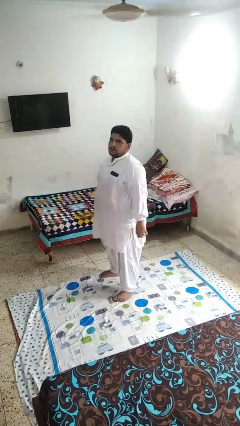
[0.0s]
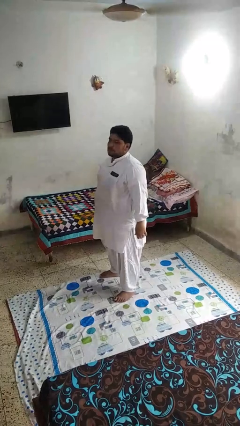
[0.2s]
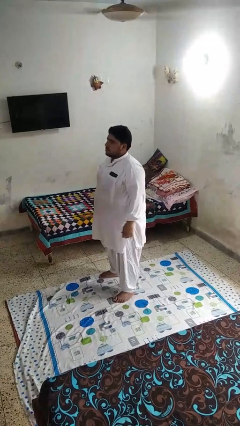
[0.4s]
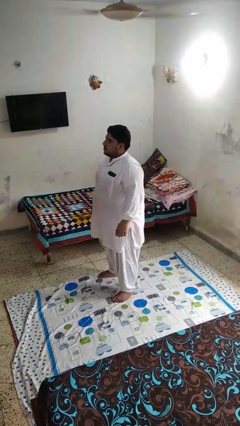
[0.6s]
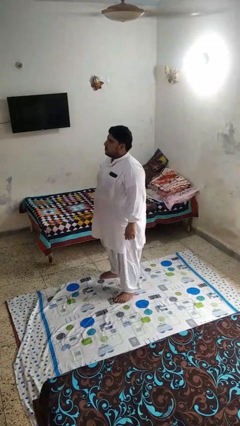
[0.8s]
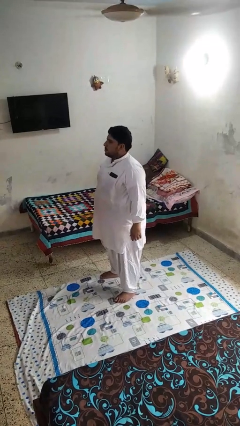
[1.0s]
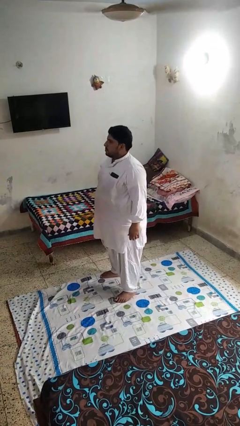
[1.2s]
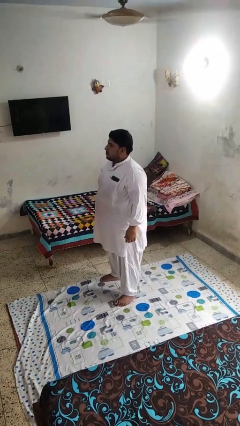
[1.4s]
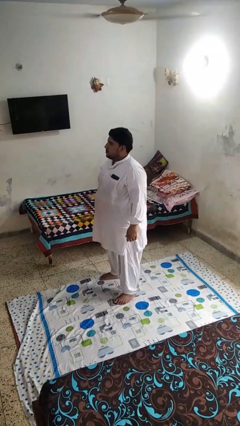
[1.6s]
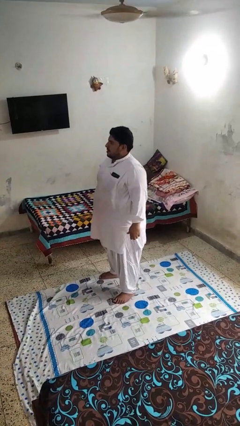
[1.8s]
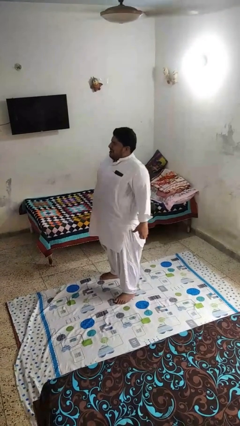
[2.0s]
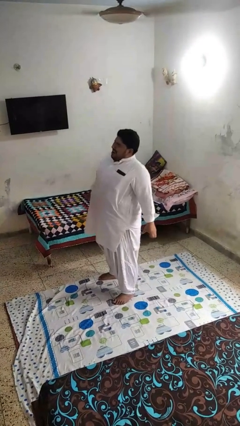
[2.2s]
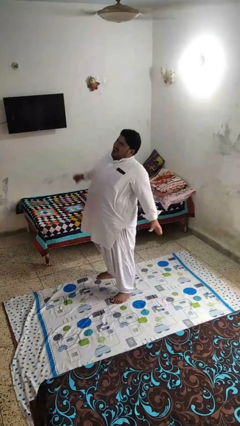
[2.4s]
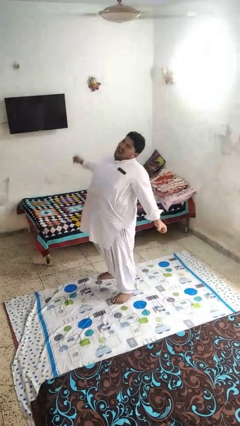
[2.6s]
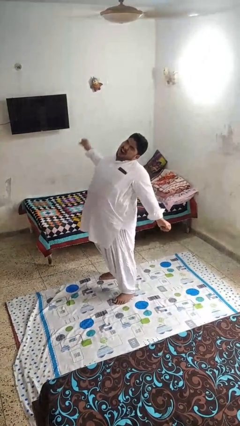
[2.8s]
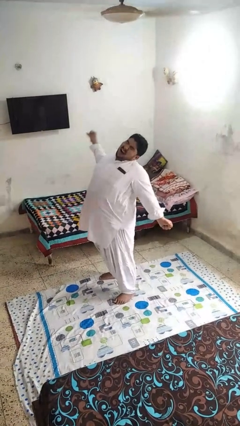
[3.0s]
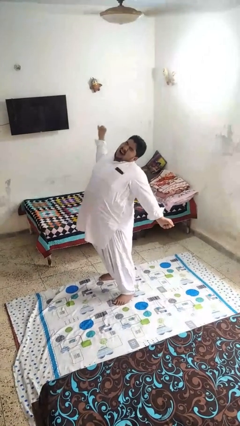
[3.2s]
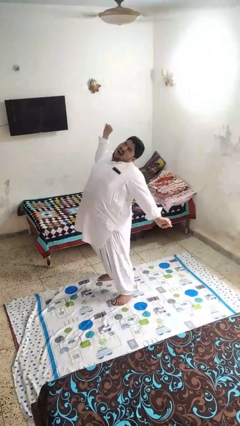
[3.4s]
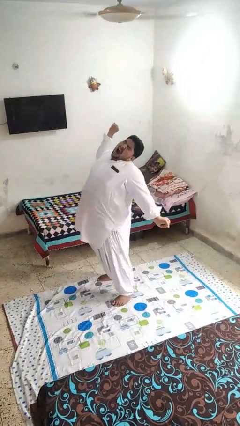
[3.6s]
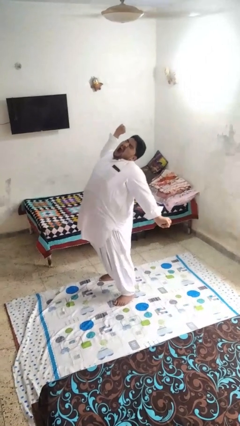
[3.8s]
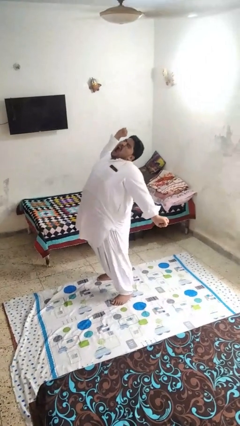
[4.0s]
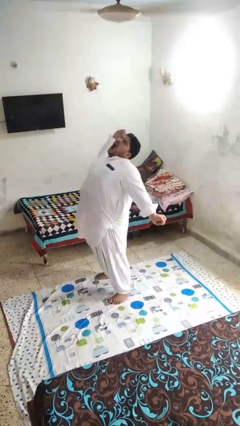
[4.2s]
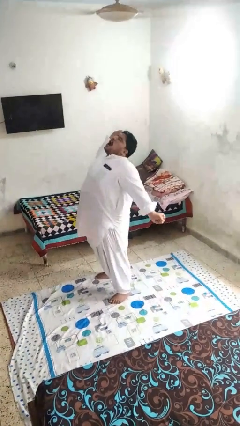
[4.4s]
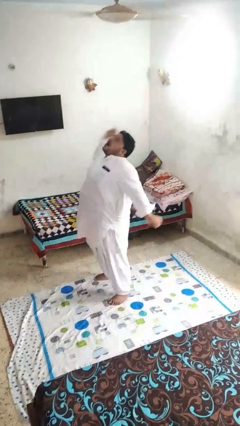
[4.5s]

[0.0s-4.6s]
person stretches back

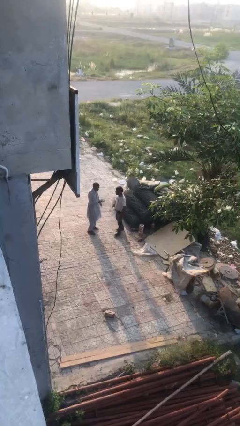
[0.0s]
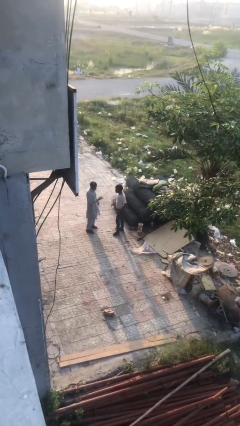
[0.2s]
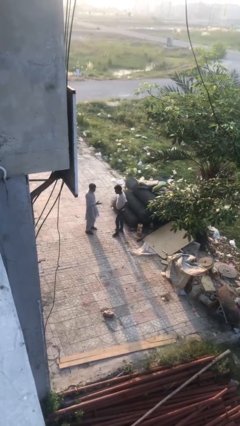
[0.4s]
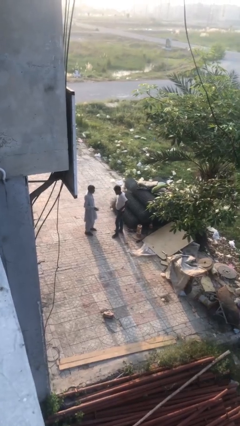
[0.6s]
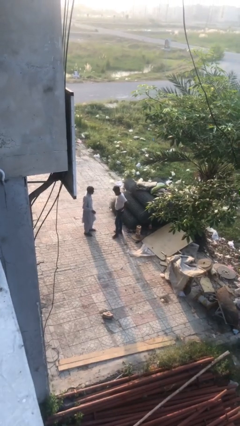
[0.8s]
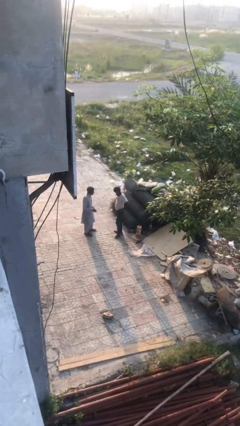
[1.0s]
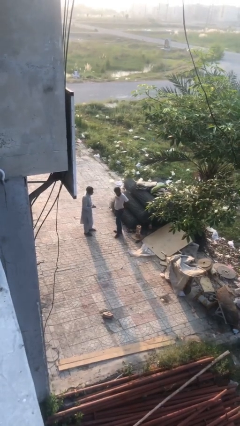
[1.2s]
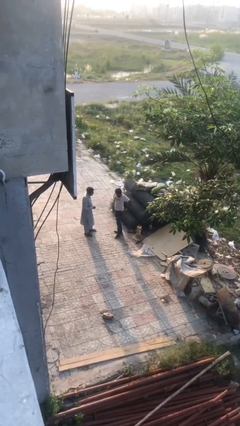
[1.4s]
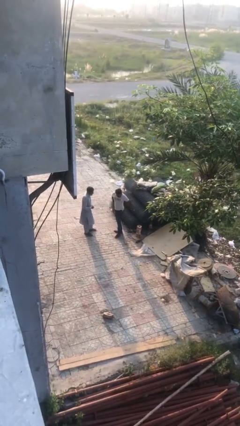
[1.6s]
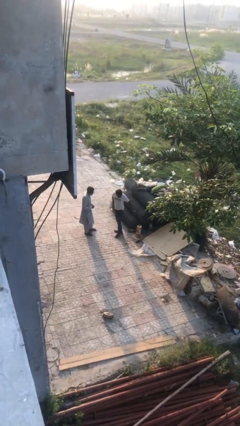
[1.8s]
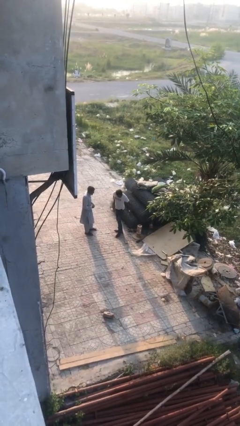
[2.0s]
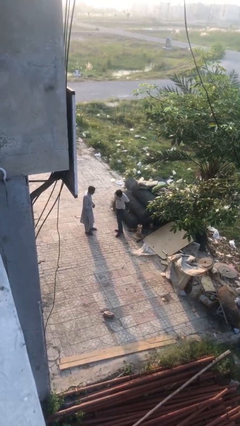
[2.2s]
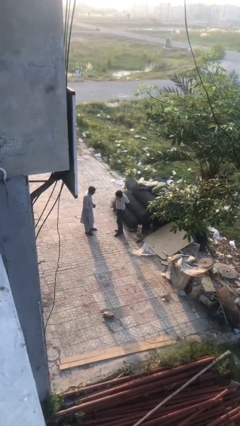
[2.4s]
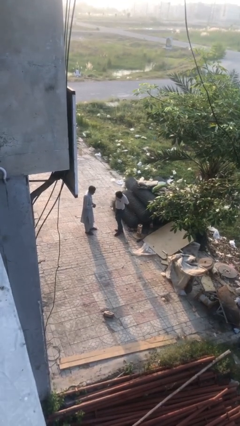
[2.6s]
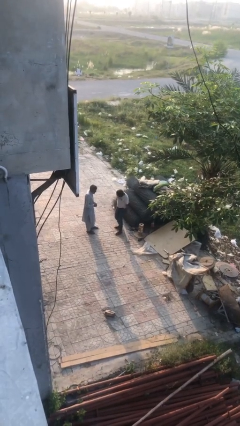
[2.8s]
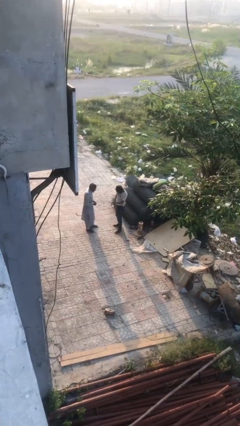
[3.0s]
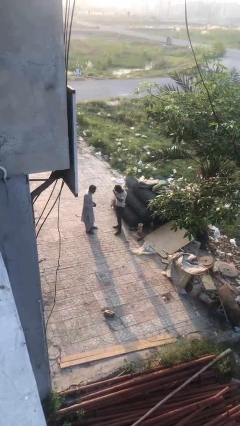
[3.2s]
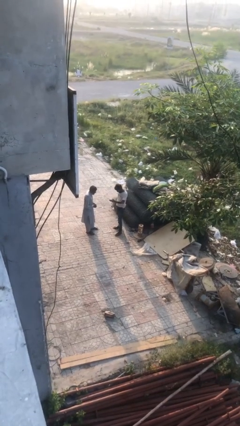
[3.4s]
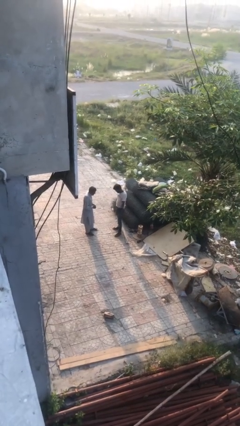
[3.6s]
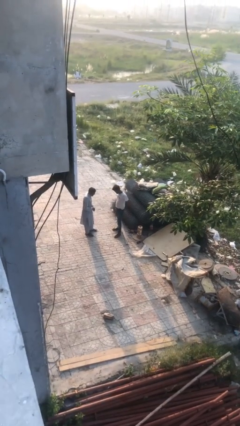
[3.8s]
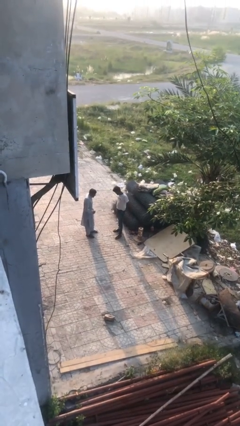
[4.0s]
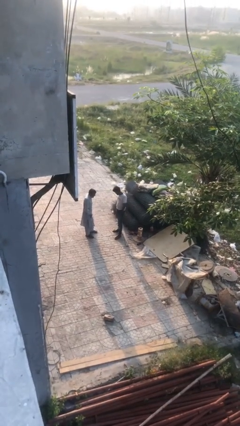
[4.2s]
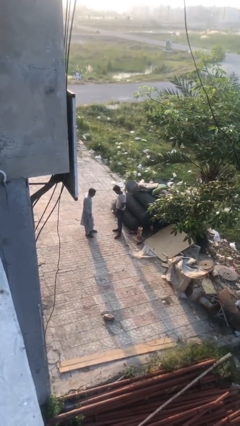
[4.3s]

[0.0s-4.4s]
person talks to person

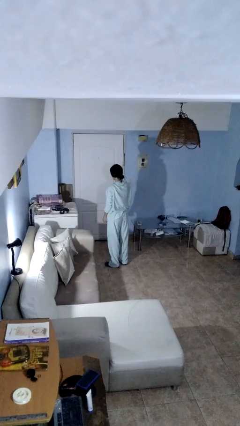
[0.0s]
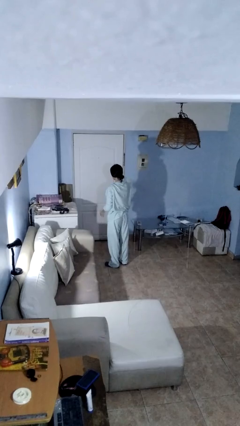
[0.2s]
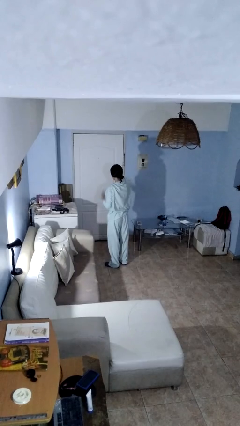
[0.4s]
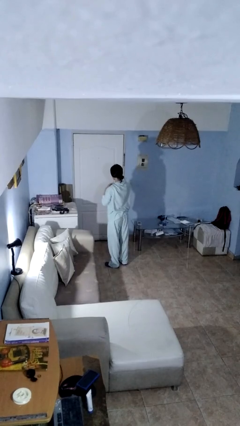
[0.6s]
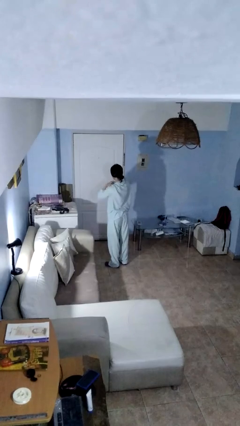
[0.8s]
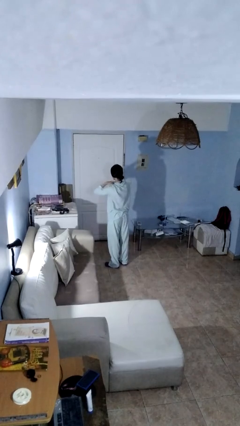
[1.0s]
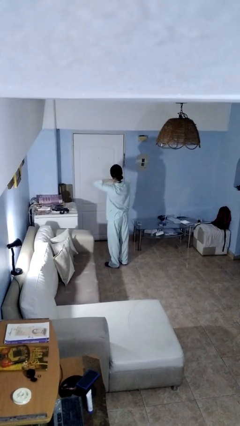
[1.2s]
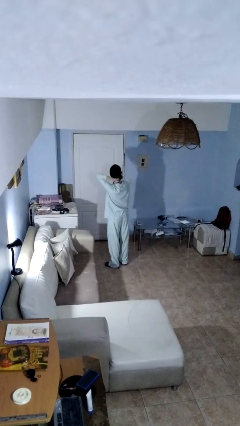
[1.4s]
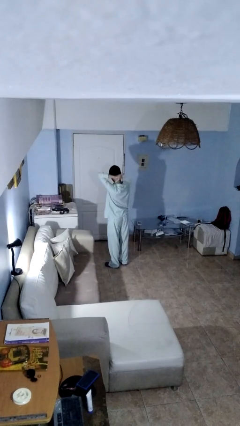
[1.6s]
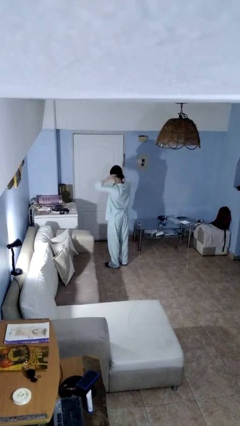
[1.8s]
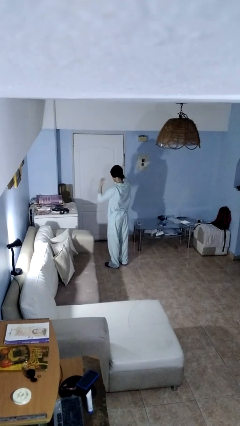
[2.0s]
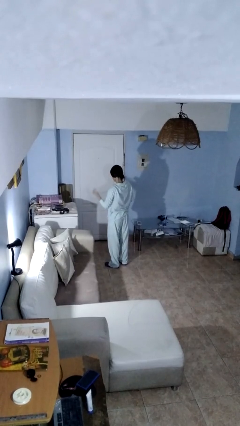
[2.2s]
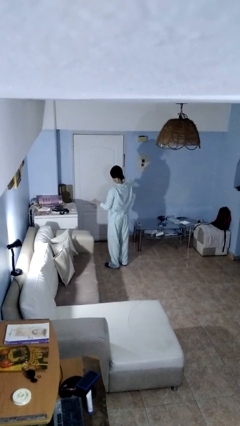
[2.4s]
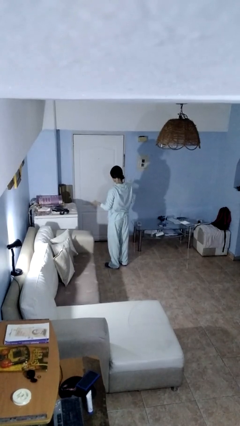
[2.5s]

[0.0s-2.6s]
person takes off necklace

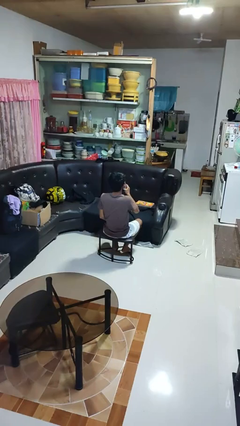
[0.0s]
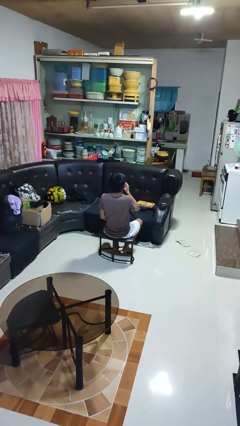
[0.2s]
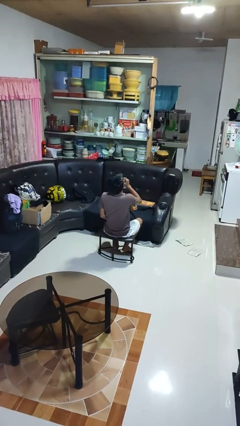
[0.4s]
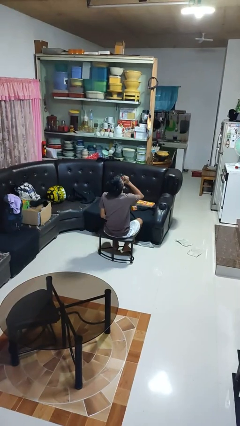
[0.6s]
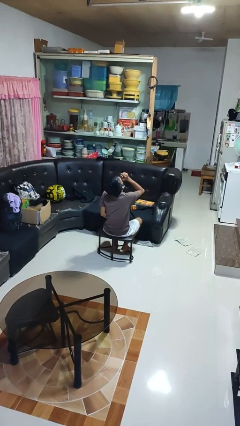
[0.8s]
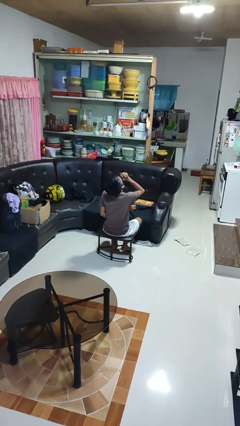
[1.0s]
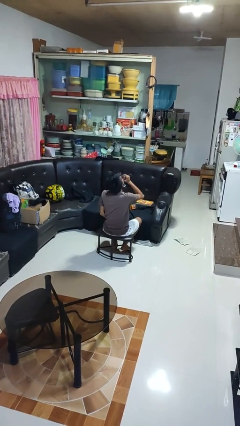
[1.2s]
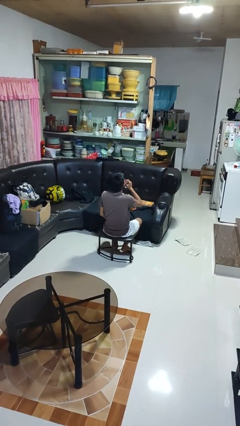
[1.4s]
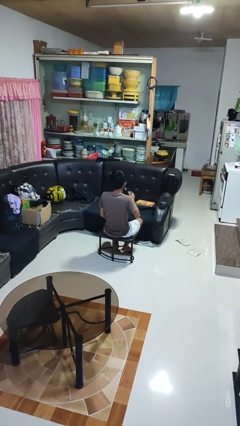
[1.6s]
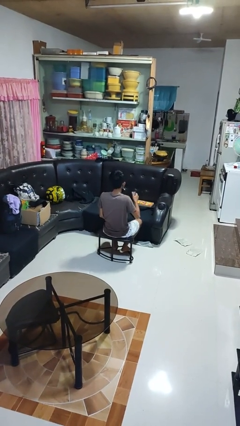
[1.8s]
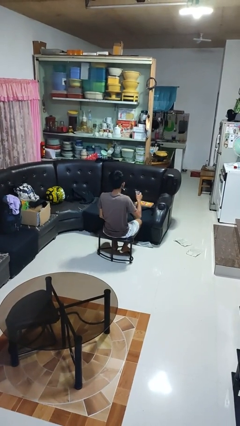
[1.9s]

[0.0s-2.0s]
person drinks from beverage can

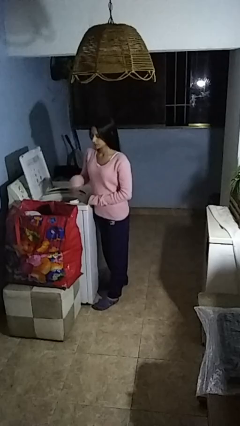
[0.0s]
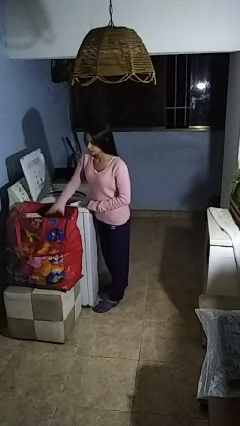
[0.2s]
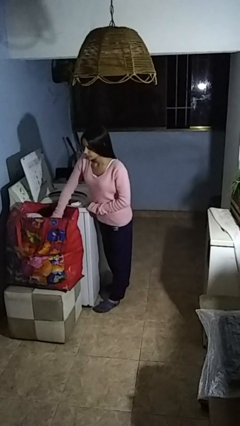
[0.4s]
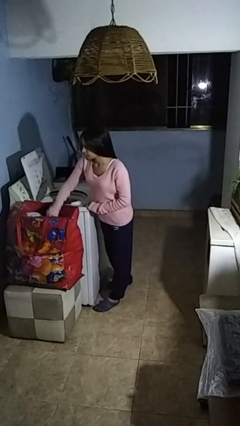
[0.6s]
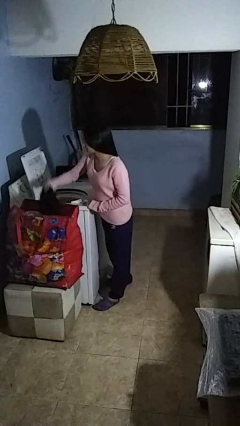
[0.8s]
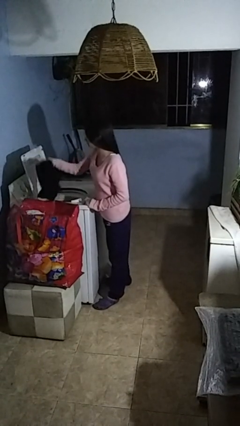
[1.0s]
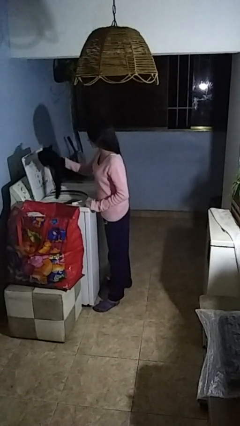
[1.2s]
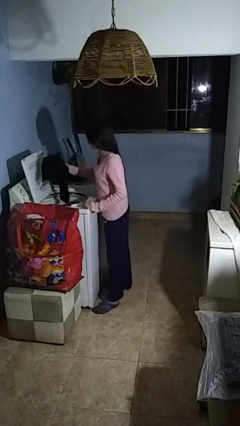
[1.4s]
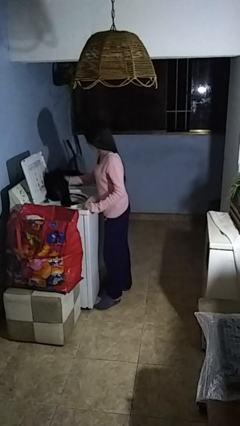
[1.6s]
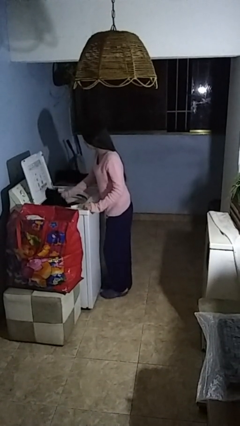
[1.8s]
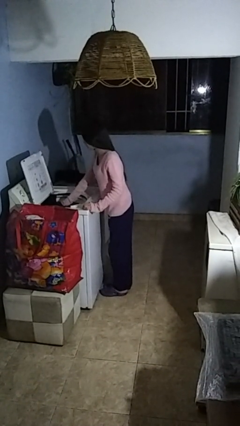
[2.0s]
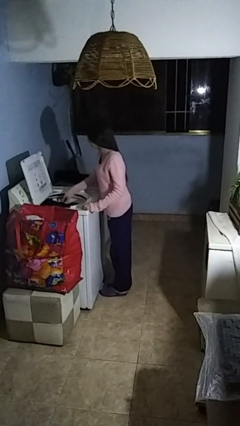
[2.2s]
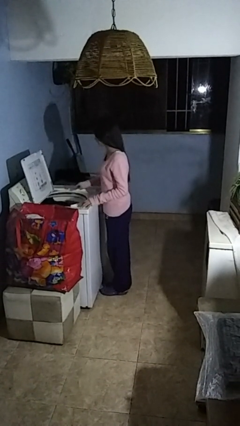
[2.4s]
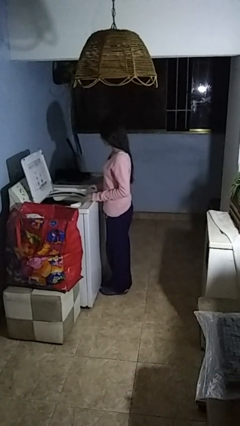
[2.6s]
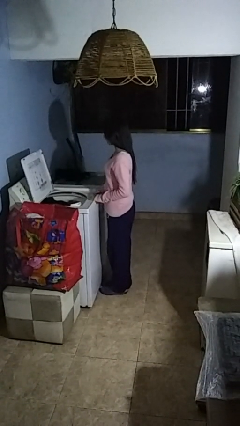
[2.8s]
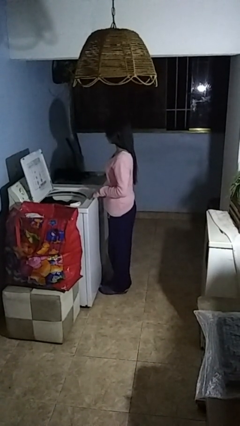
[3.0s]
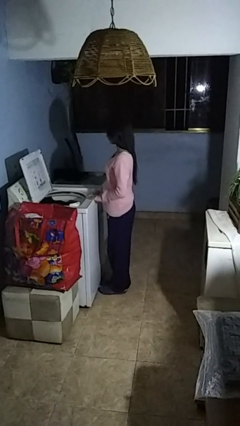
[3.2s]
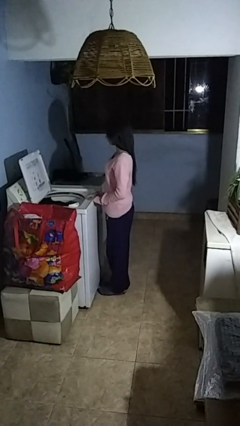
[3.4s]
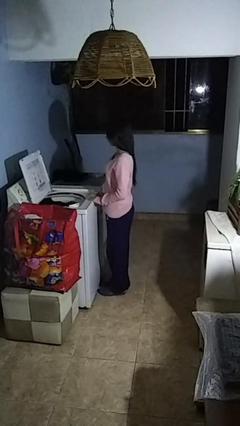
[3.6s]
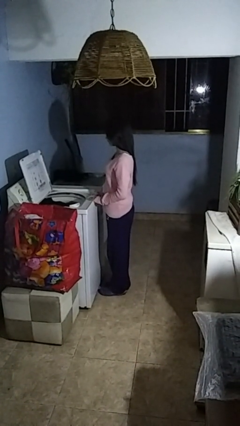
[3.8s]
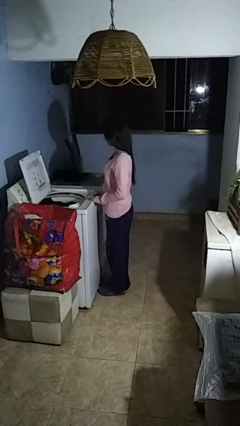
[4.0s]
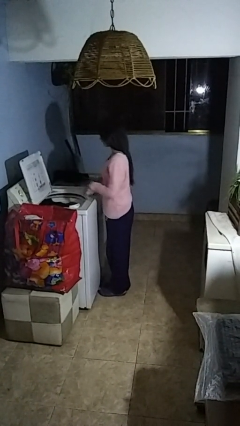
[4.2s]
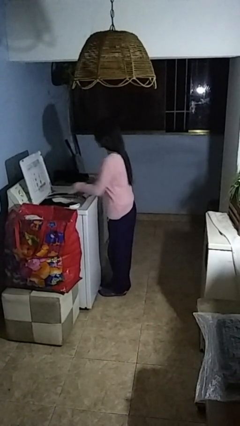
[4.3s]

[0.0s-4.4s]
person loads clotheswasher
